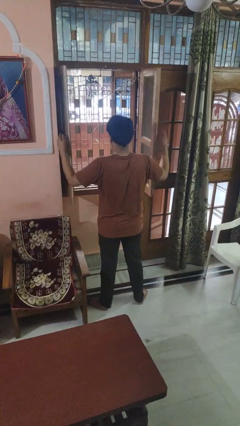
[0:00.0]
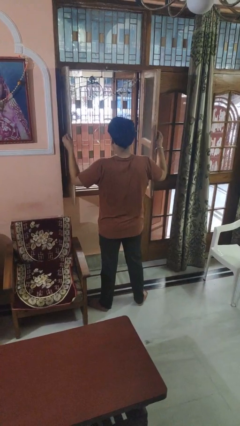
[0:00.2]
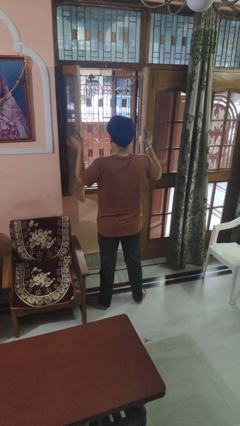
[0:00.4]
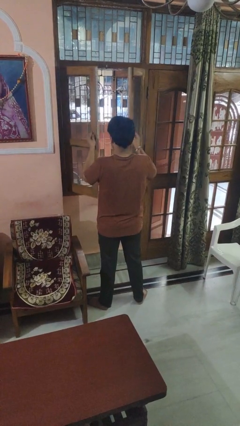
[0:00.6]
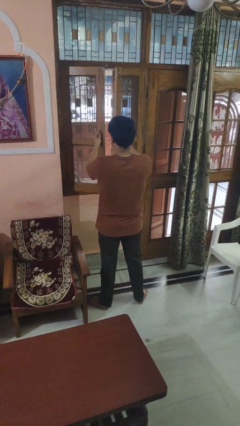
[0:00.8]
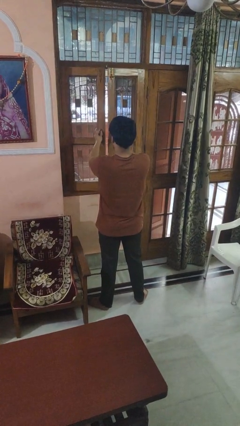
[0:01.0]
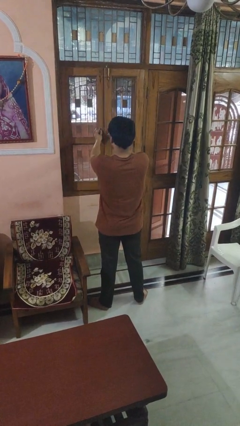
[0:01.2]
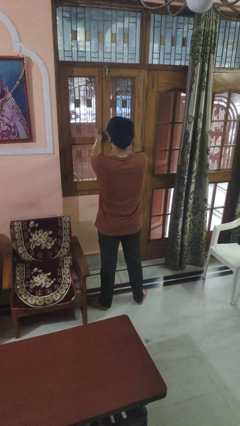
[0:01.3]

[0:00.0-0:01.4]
person closes home window

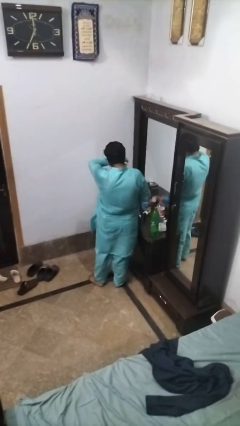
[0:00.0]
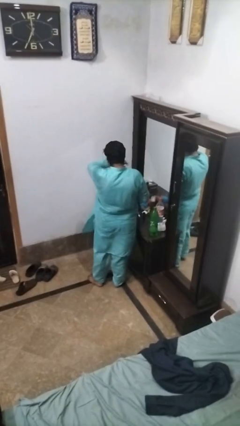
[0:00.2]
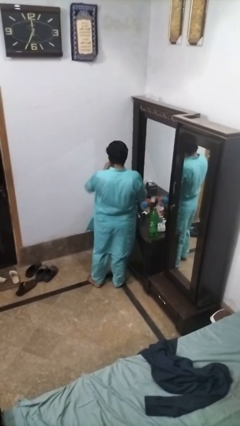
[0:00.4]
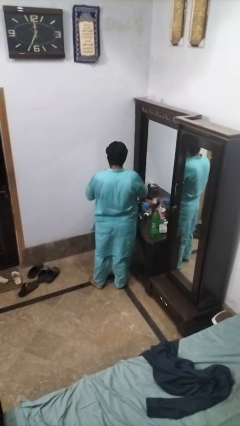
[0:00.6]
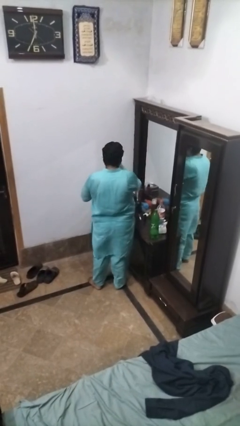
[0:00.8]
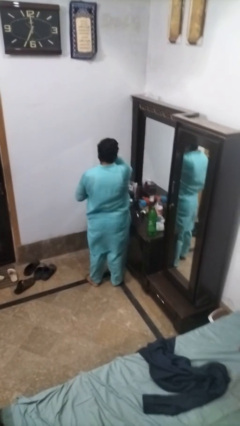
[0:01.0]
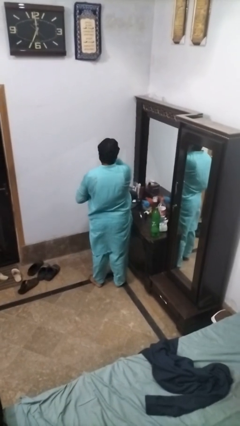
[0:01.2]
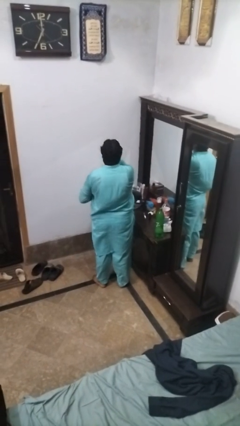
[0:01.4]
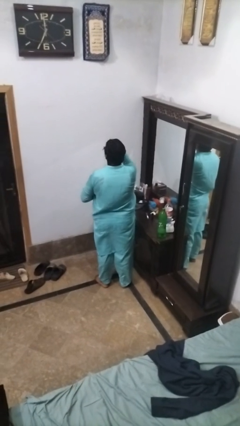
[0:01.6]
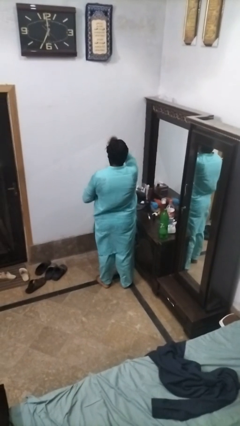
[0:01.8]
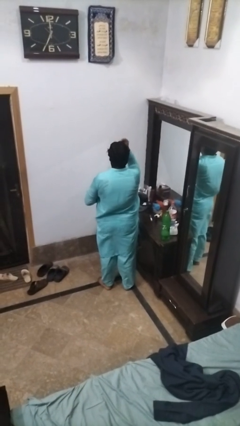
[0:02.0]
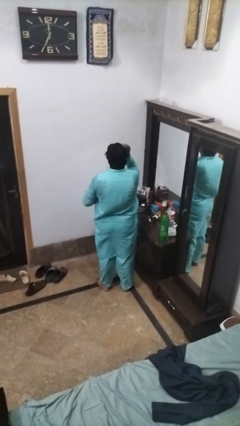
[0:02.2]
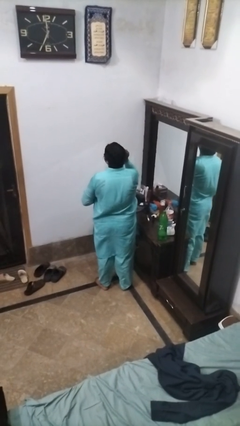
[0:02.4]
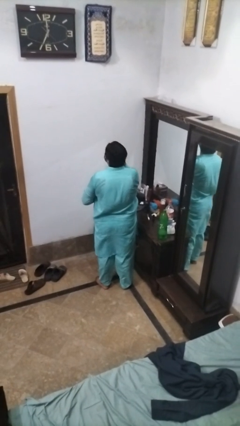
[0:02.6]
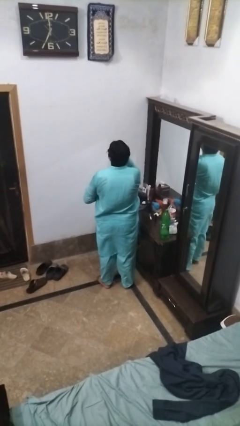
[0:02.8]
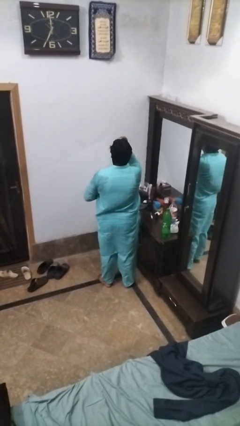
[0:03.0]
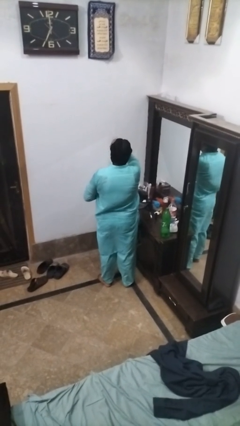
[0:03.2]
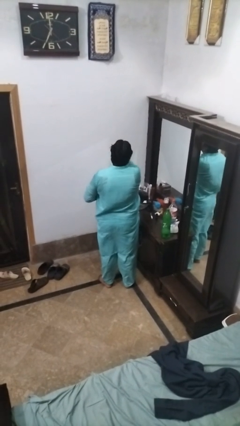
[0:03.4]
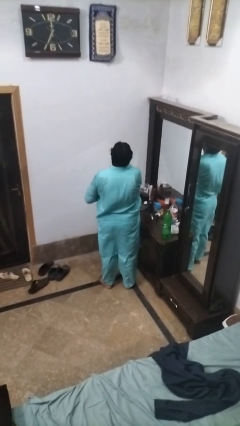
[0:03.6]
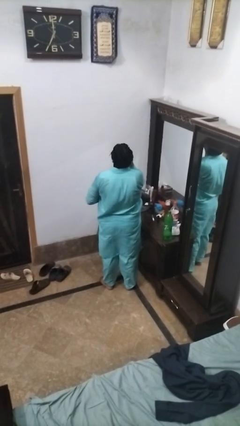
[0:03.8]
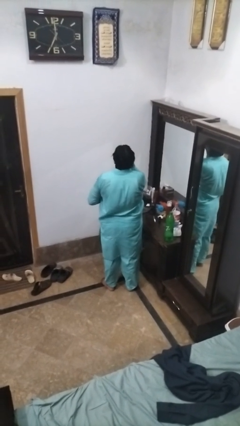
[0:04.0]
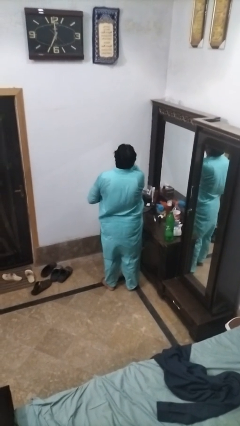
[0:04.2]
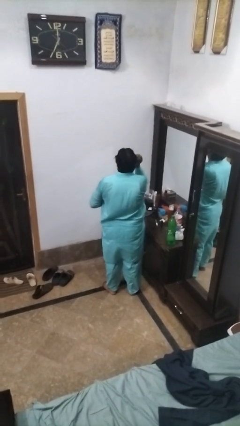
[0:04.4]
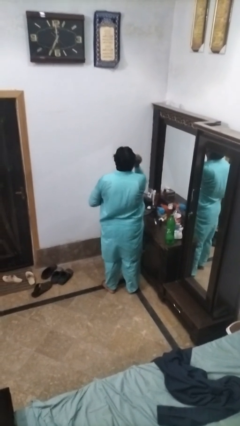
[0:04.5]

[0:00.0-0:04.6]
person applies foundation makeup

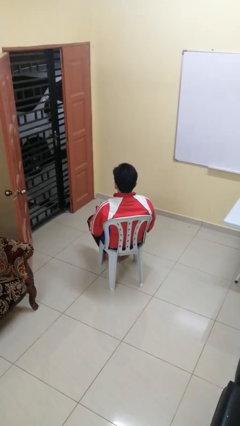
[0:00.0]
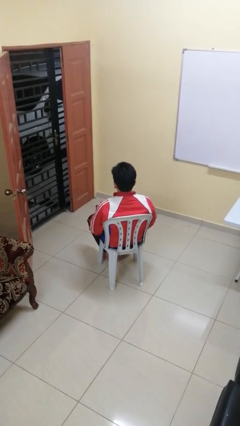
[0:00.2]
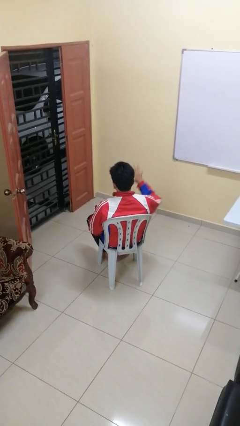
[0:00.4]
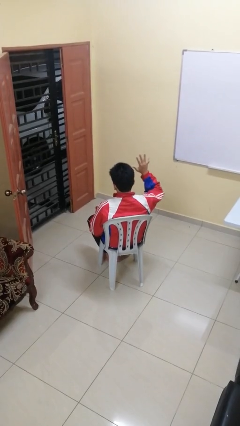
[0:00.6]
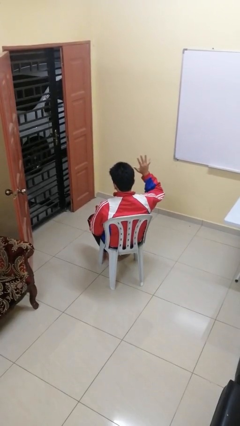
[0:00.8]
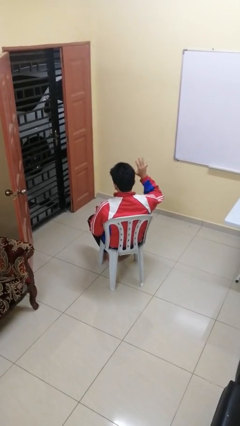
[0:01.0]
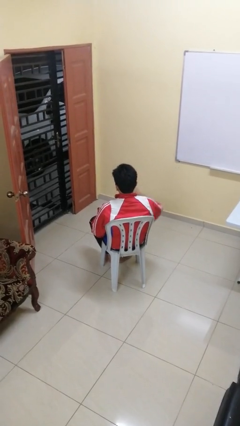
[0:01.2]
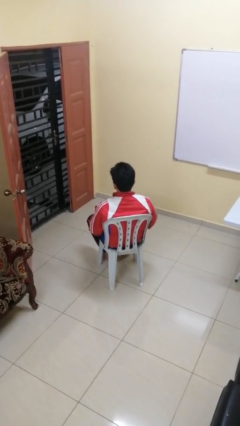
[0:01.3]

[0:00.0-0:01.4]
person gestures number five

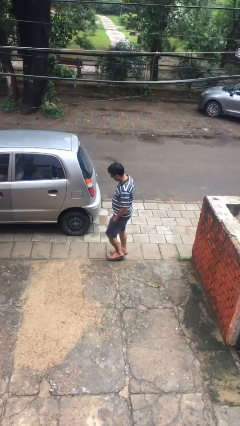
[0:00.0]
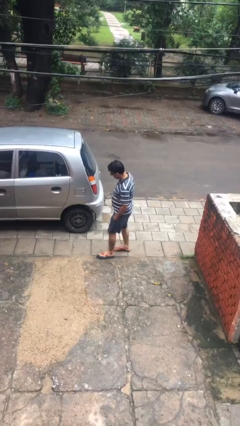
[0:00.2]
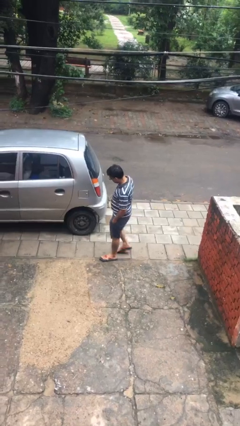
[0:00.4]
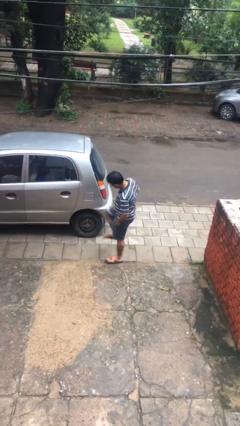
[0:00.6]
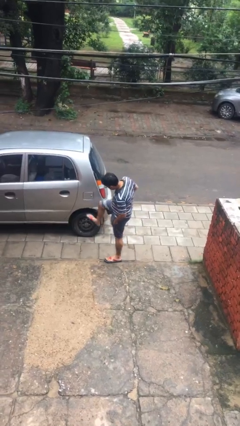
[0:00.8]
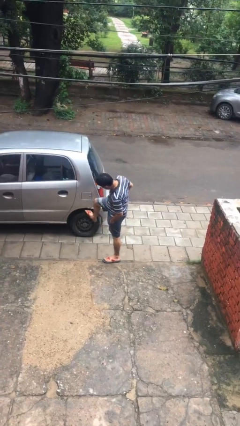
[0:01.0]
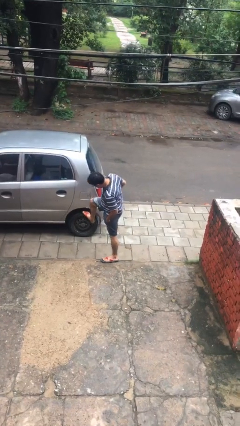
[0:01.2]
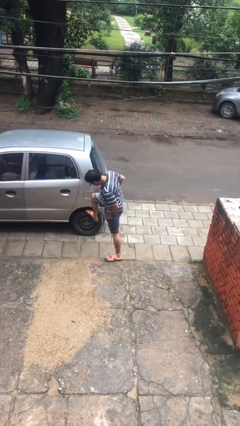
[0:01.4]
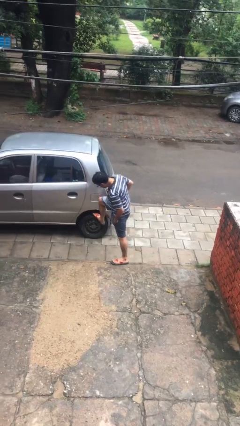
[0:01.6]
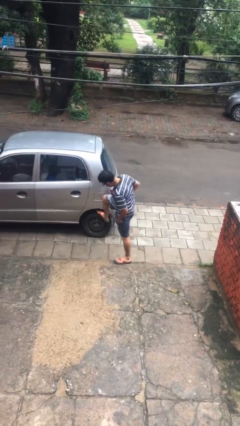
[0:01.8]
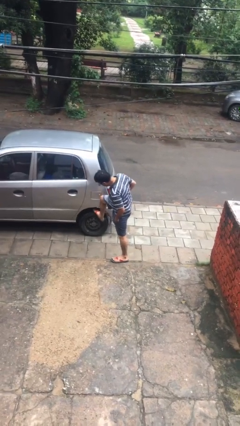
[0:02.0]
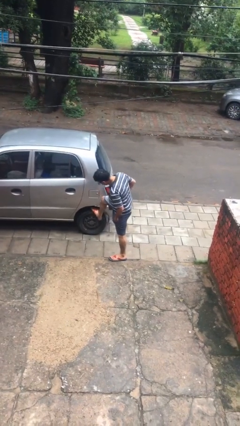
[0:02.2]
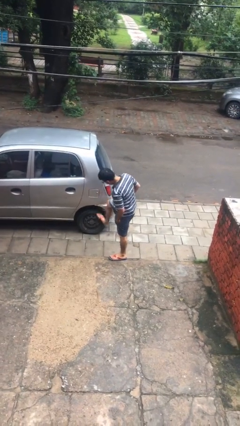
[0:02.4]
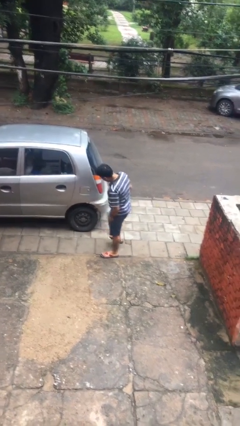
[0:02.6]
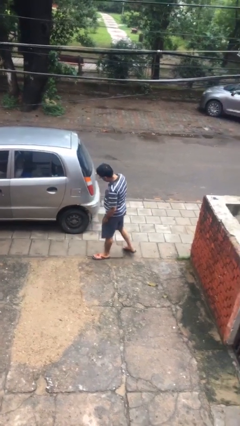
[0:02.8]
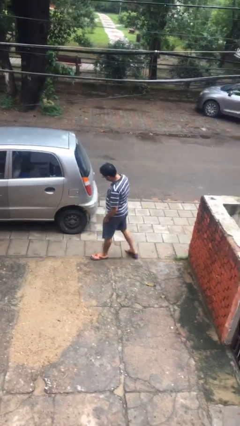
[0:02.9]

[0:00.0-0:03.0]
person kicks car tires

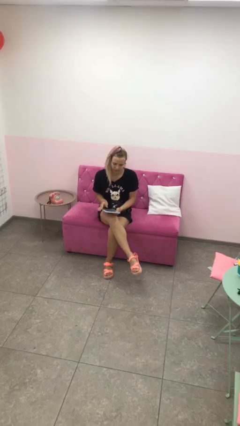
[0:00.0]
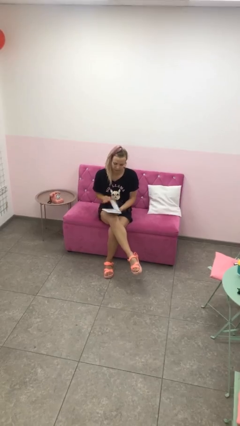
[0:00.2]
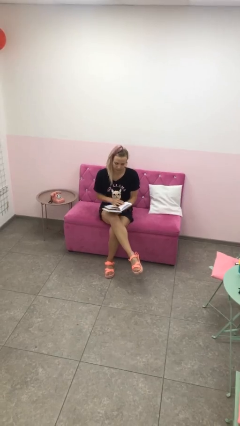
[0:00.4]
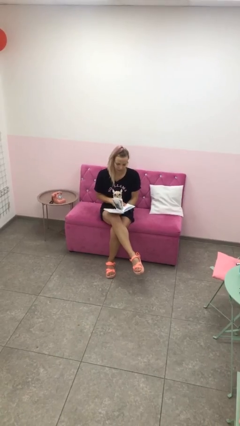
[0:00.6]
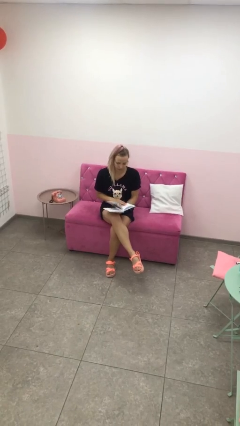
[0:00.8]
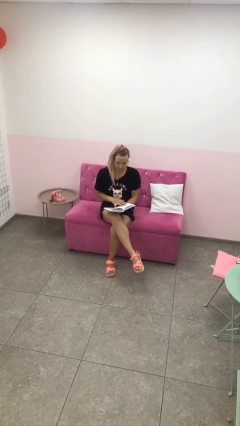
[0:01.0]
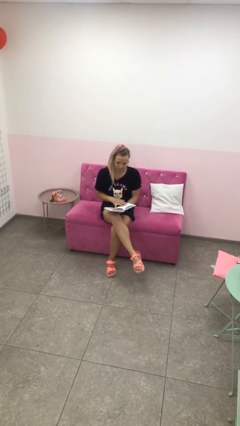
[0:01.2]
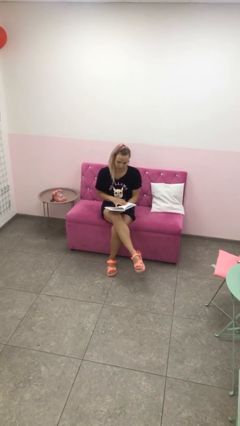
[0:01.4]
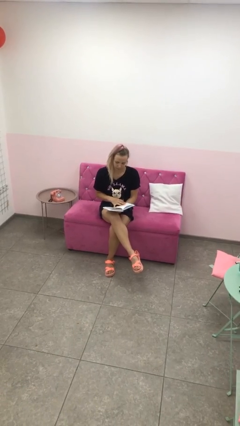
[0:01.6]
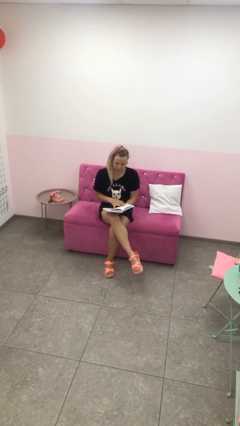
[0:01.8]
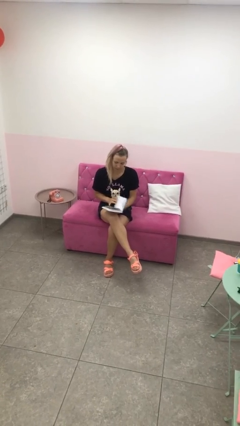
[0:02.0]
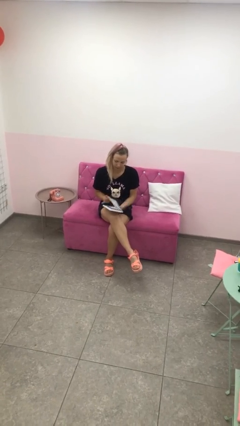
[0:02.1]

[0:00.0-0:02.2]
person reads book

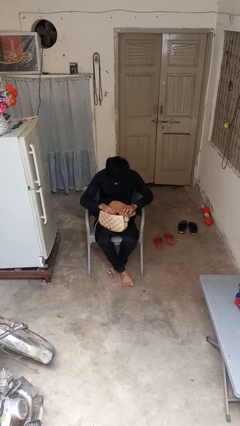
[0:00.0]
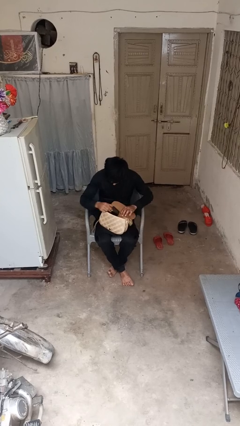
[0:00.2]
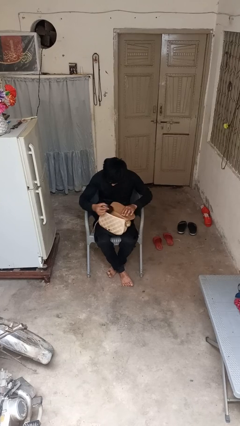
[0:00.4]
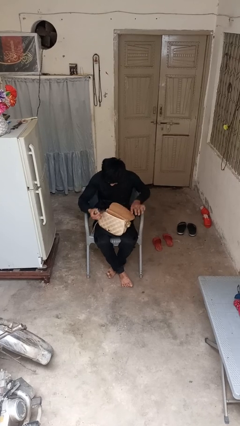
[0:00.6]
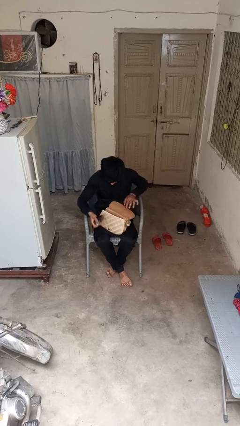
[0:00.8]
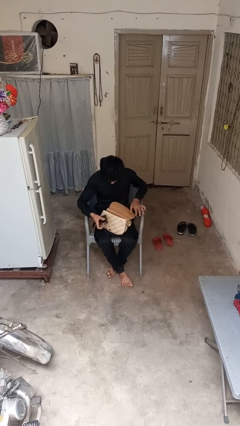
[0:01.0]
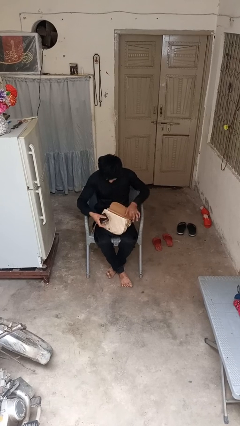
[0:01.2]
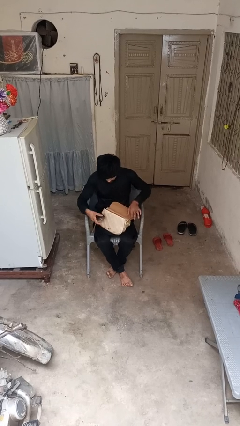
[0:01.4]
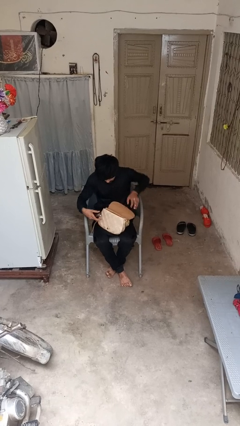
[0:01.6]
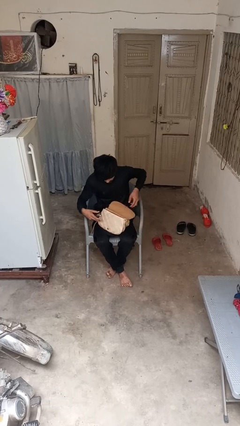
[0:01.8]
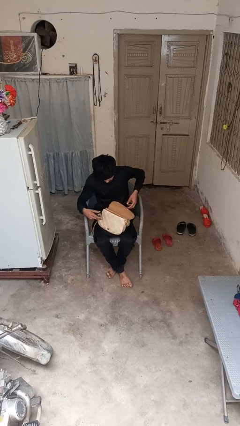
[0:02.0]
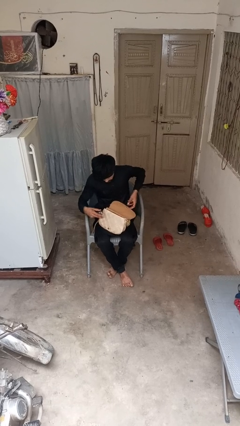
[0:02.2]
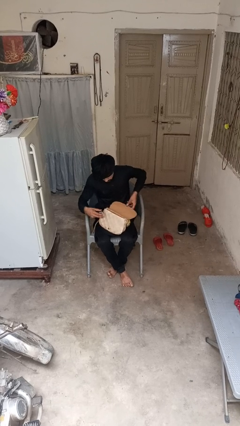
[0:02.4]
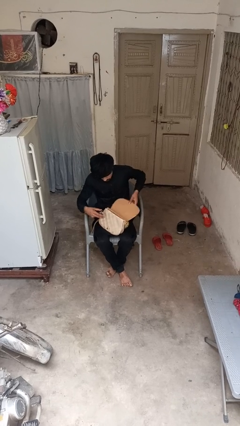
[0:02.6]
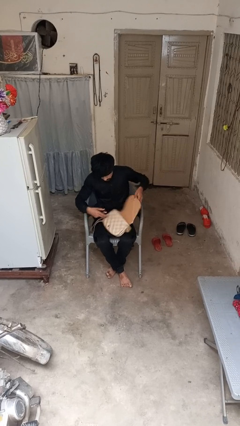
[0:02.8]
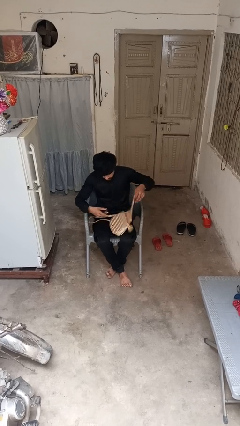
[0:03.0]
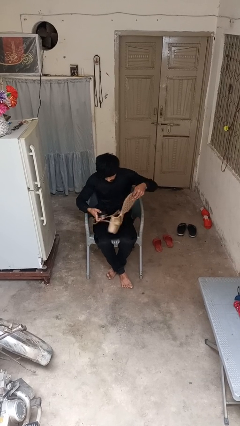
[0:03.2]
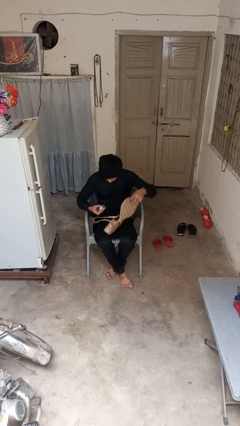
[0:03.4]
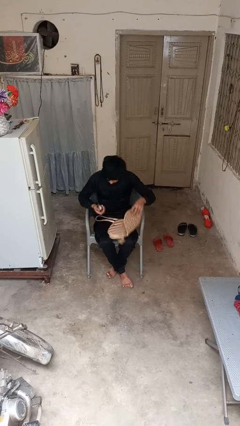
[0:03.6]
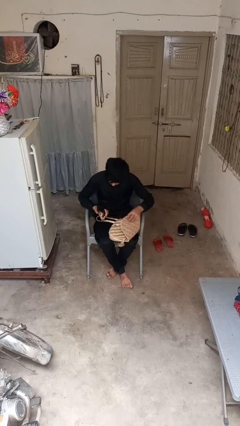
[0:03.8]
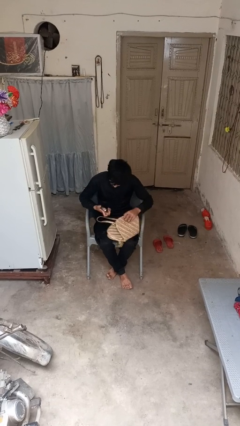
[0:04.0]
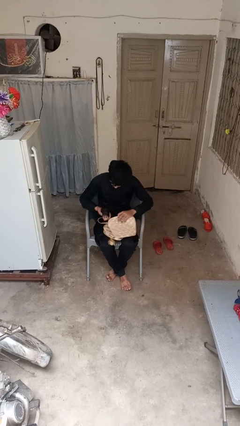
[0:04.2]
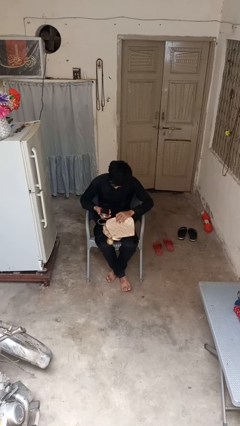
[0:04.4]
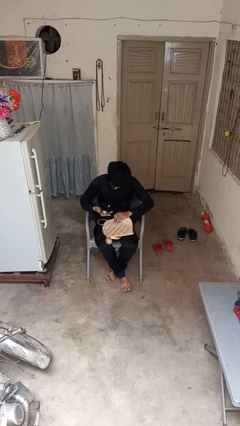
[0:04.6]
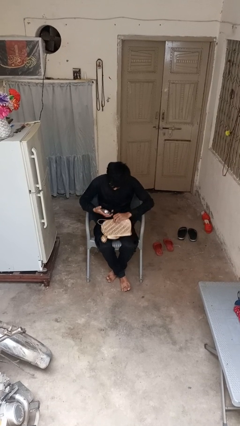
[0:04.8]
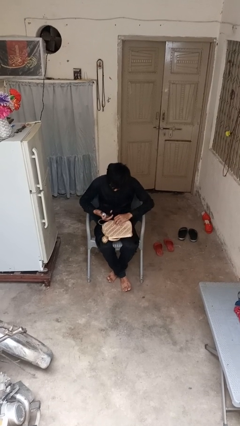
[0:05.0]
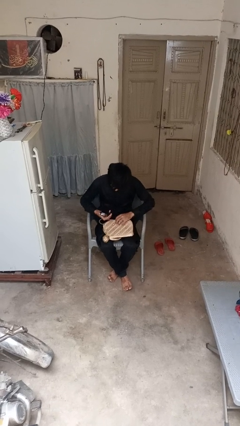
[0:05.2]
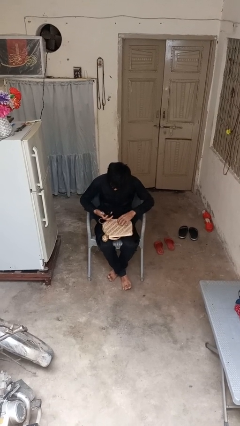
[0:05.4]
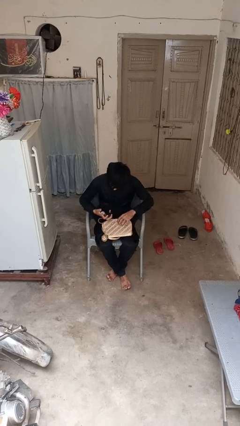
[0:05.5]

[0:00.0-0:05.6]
person takes object from purse
